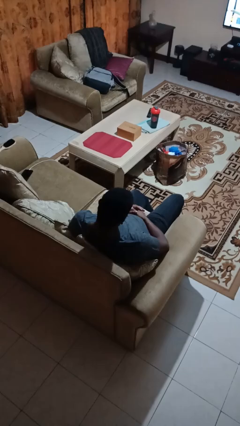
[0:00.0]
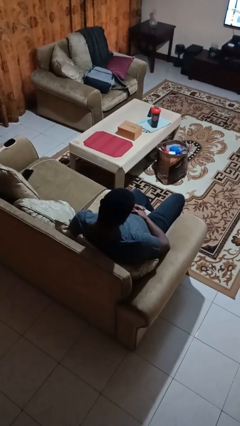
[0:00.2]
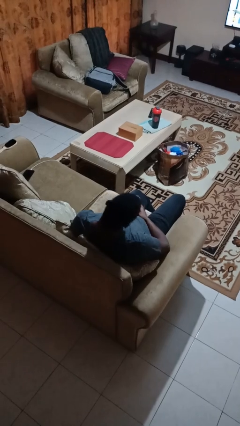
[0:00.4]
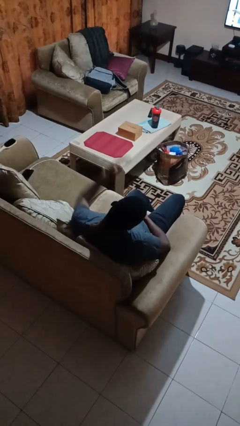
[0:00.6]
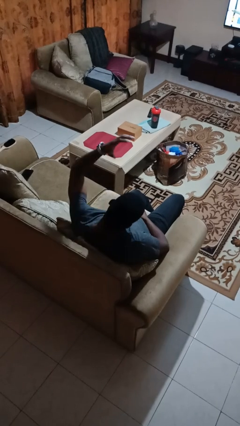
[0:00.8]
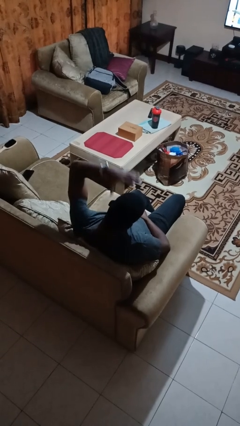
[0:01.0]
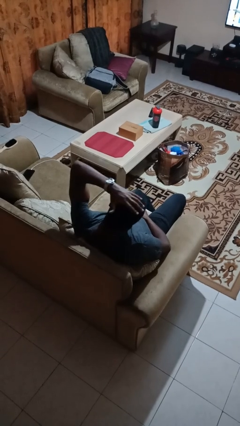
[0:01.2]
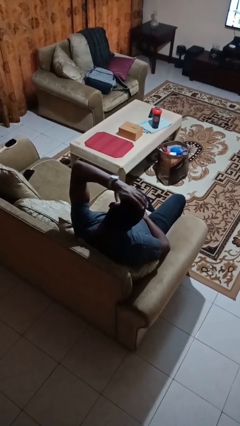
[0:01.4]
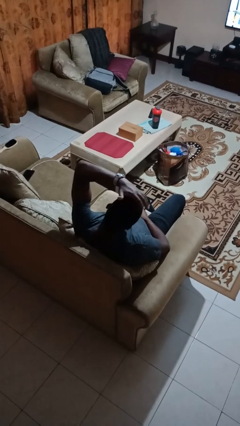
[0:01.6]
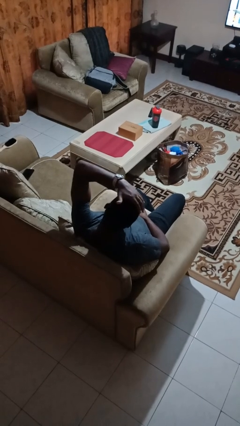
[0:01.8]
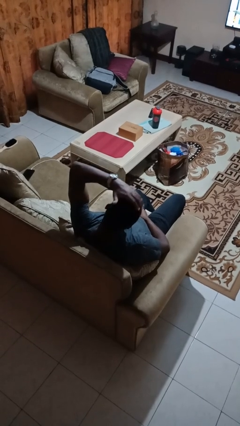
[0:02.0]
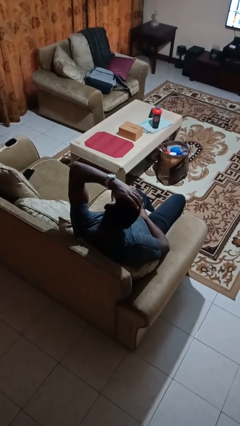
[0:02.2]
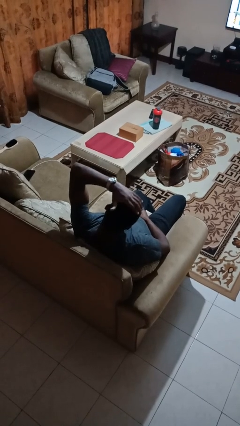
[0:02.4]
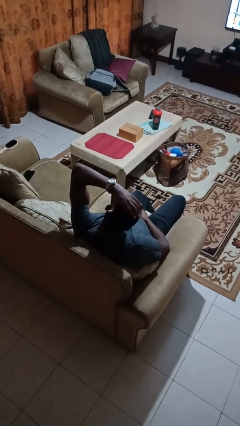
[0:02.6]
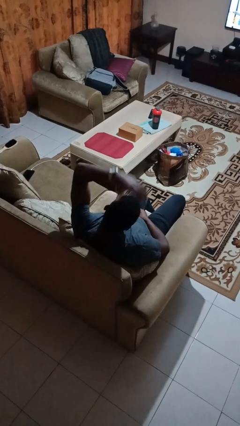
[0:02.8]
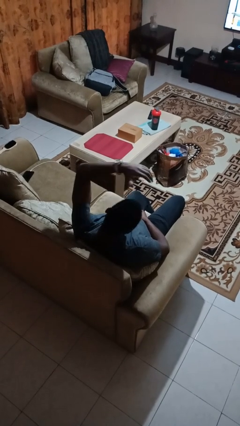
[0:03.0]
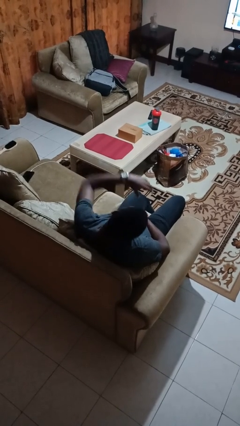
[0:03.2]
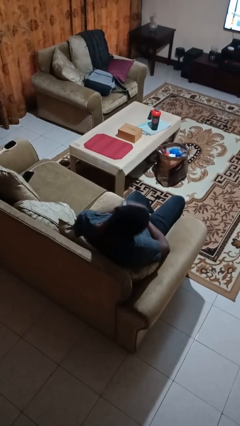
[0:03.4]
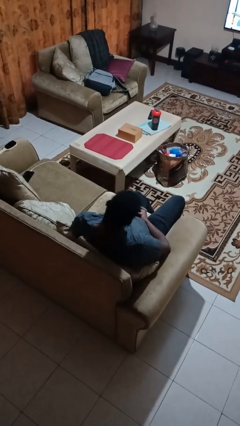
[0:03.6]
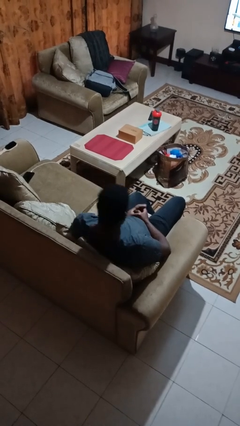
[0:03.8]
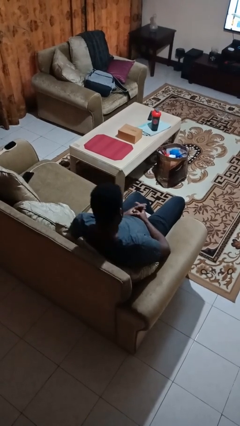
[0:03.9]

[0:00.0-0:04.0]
person pats head

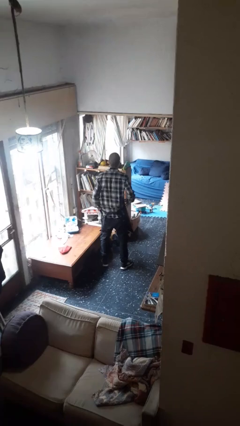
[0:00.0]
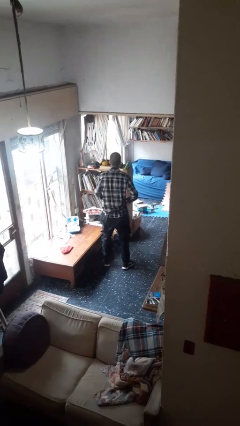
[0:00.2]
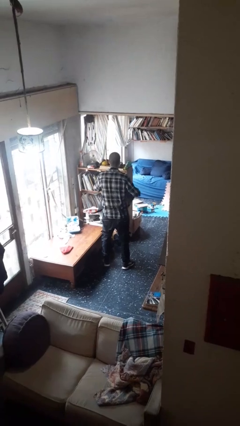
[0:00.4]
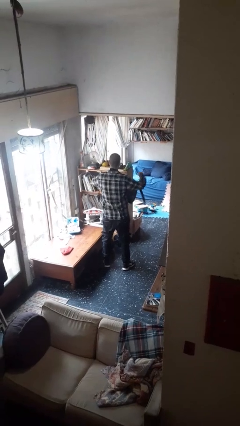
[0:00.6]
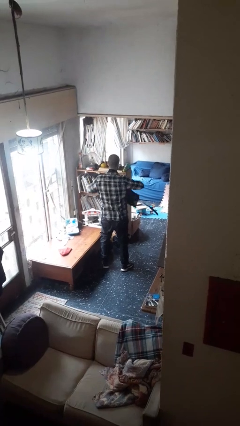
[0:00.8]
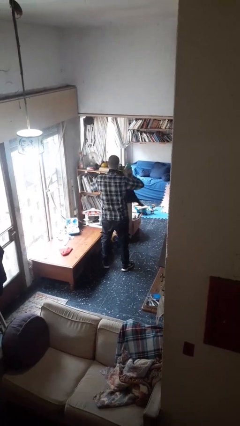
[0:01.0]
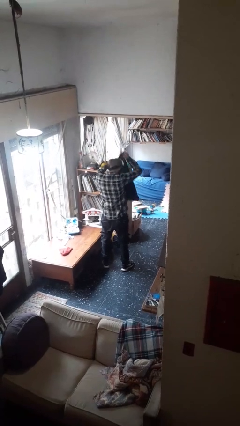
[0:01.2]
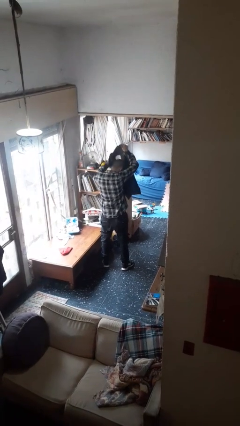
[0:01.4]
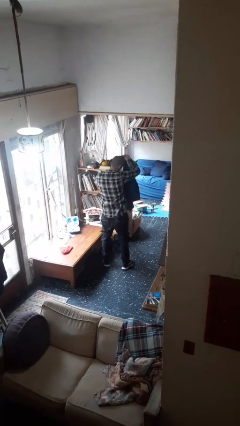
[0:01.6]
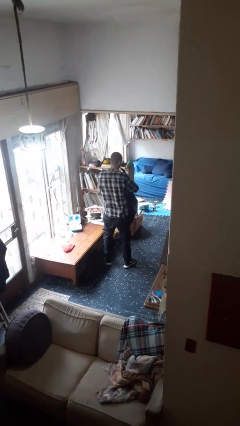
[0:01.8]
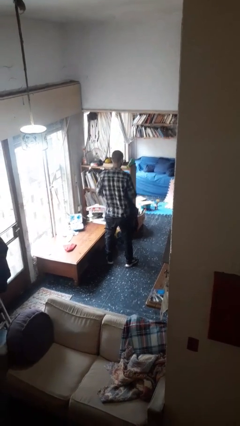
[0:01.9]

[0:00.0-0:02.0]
person takes off apron

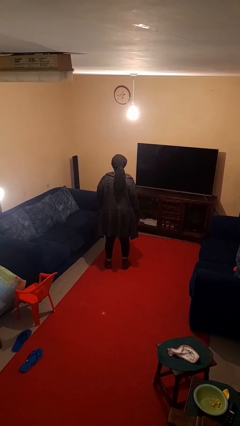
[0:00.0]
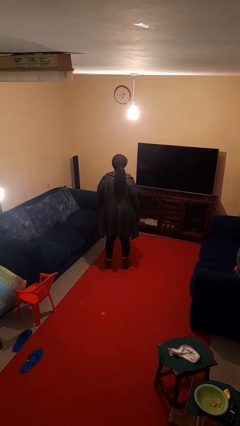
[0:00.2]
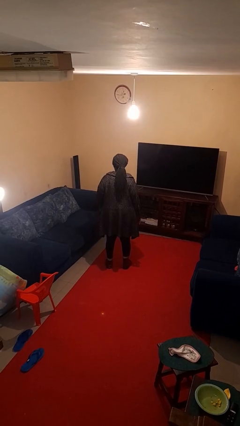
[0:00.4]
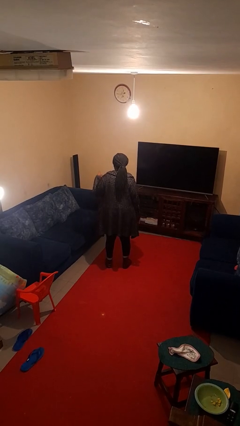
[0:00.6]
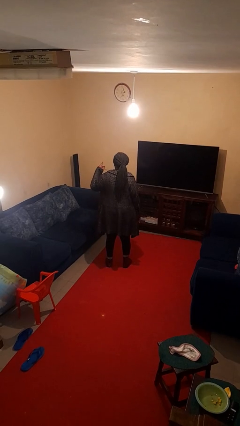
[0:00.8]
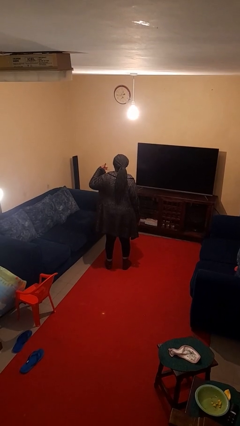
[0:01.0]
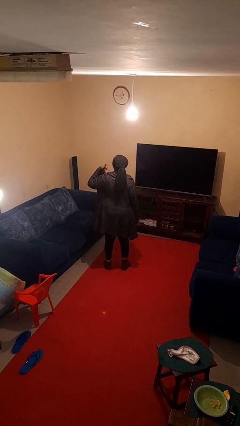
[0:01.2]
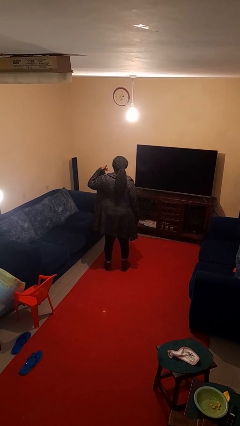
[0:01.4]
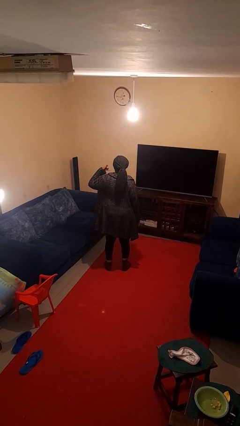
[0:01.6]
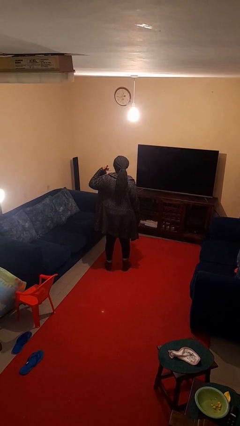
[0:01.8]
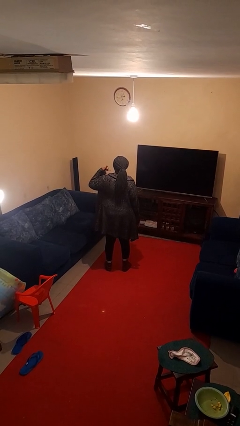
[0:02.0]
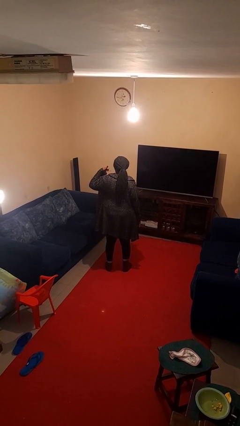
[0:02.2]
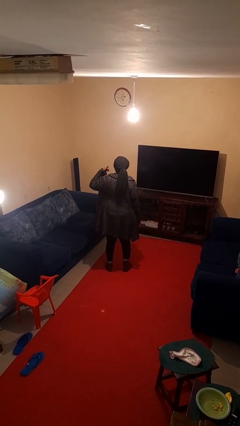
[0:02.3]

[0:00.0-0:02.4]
person gestures call me

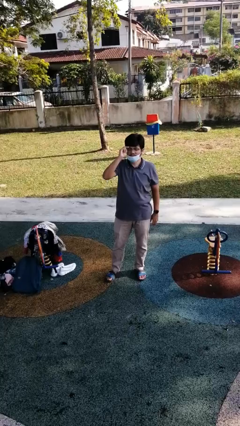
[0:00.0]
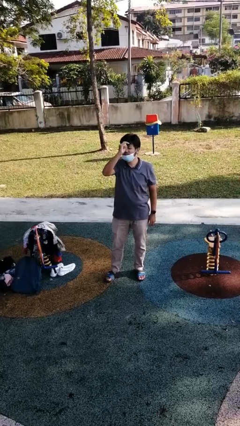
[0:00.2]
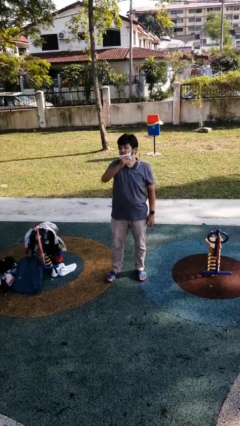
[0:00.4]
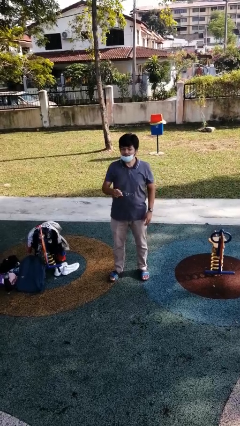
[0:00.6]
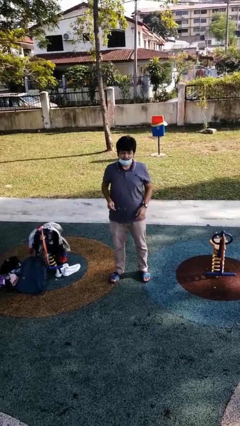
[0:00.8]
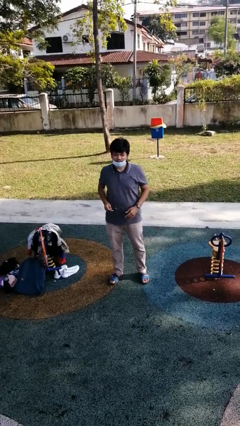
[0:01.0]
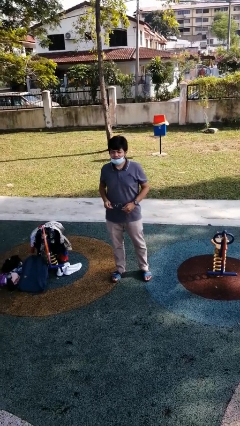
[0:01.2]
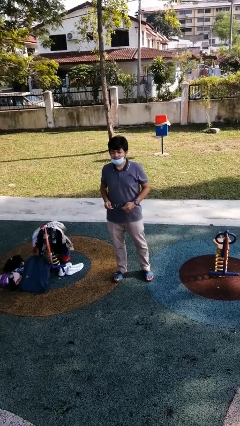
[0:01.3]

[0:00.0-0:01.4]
person takes off glasses

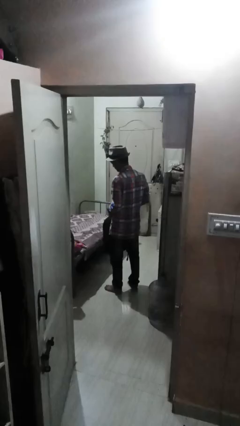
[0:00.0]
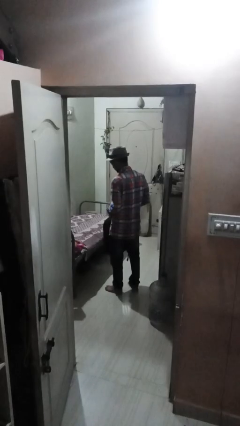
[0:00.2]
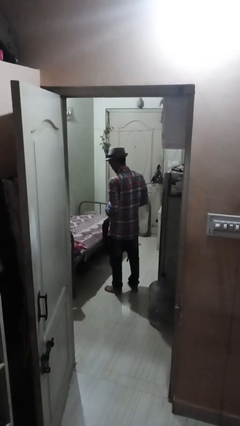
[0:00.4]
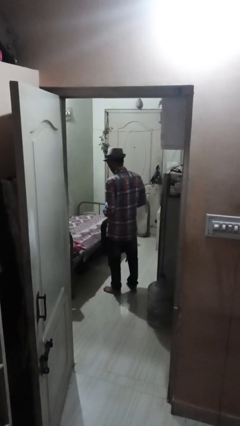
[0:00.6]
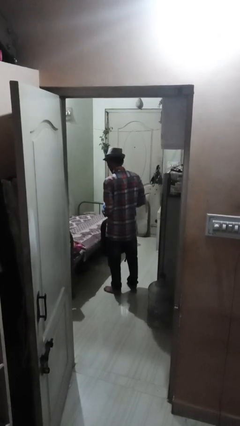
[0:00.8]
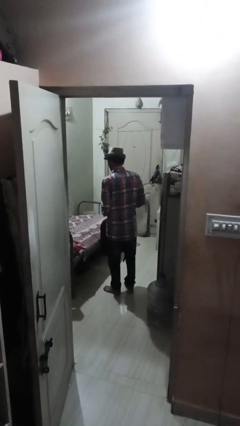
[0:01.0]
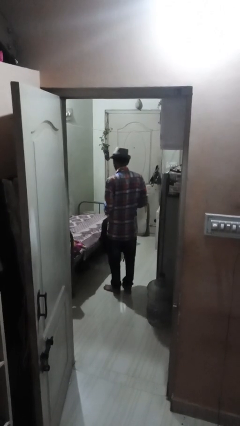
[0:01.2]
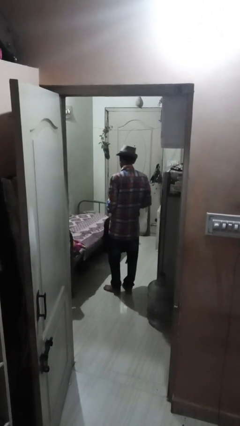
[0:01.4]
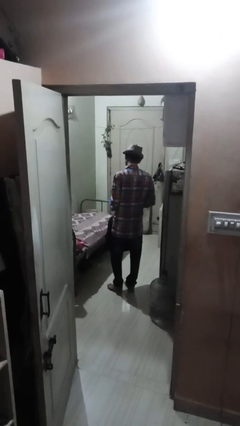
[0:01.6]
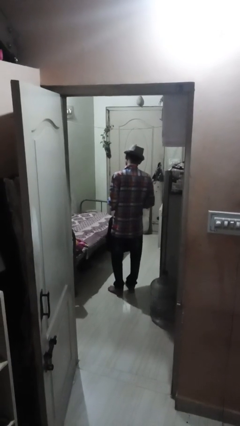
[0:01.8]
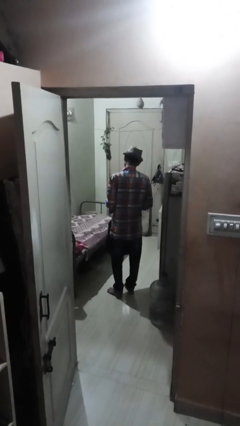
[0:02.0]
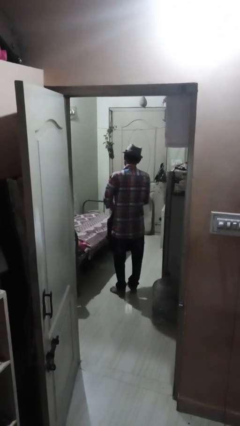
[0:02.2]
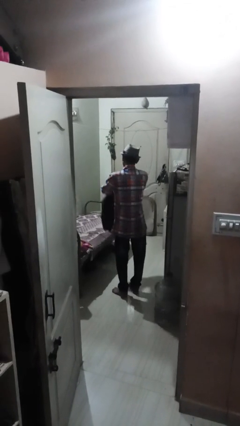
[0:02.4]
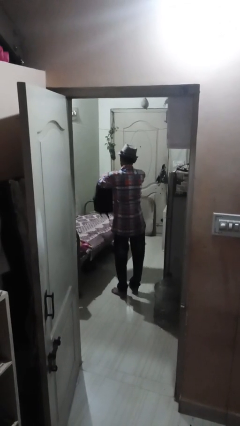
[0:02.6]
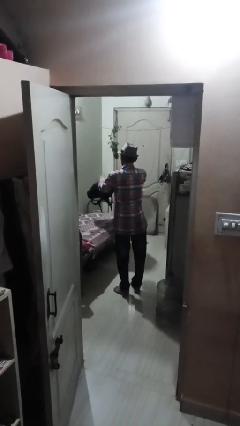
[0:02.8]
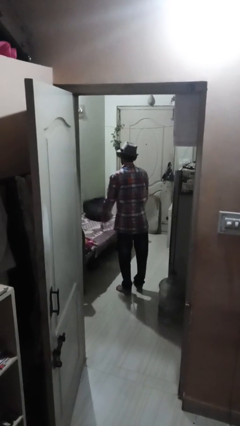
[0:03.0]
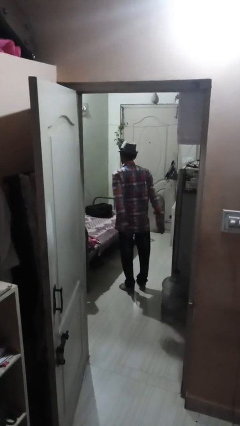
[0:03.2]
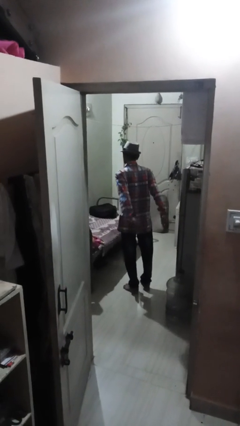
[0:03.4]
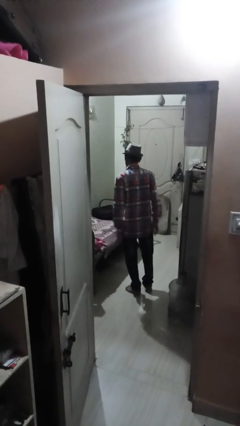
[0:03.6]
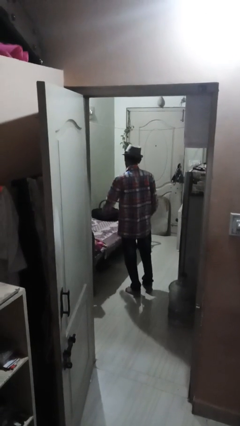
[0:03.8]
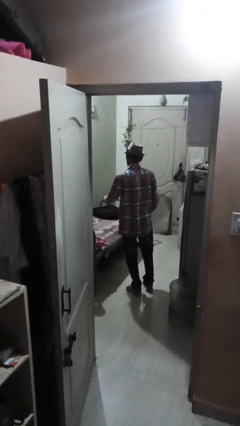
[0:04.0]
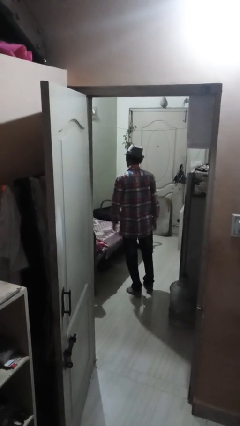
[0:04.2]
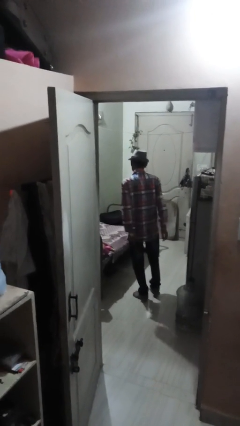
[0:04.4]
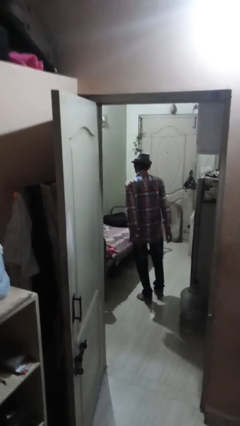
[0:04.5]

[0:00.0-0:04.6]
person throws object on bed

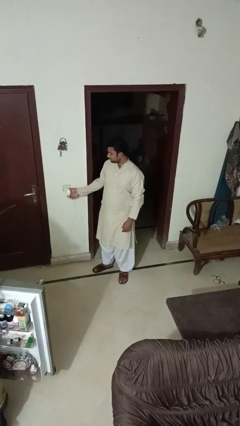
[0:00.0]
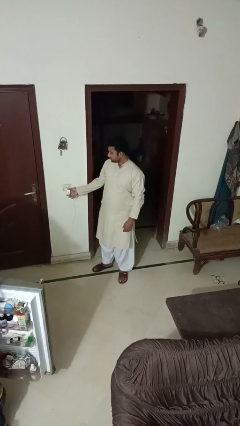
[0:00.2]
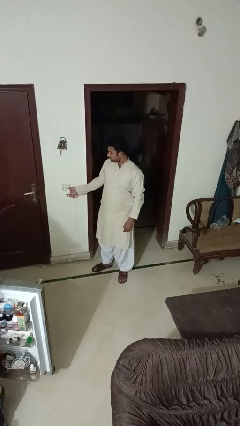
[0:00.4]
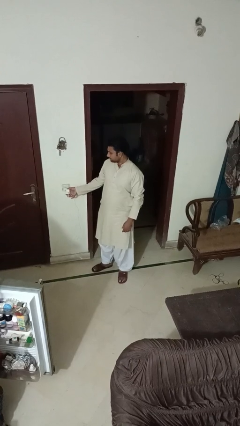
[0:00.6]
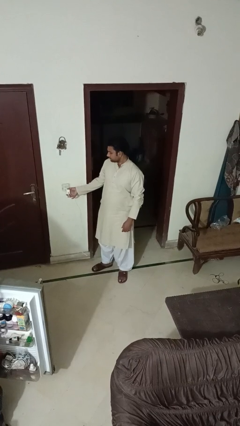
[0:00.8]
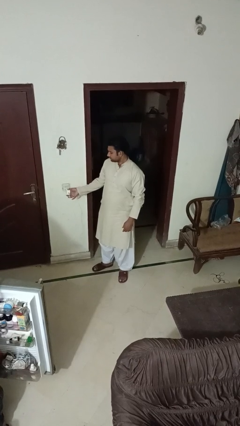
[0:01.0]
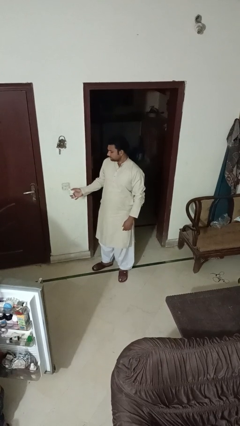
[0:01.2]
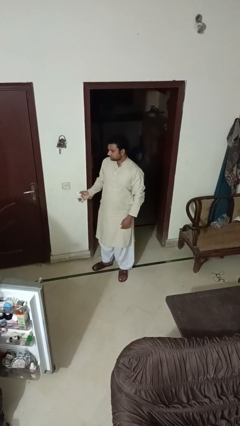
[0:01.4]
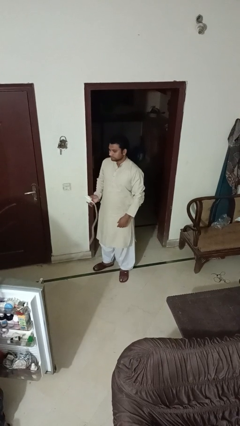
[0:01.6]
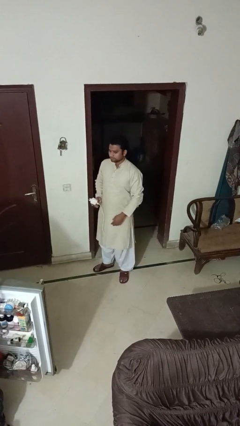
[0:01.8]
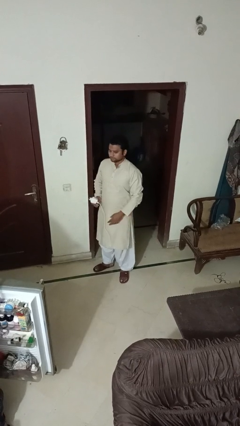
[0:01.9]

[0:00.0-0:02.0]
person unplugs from electrical socket

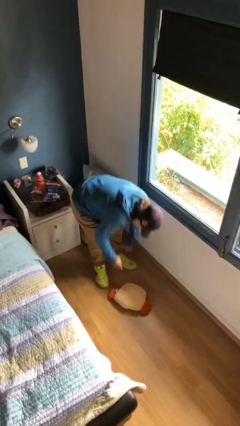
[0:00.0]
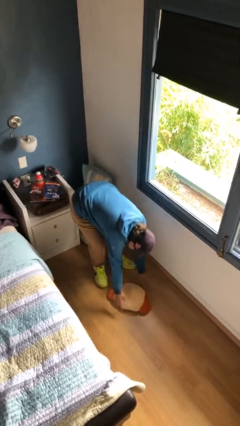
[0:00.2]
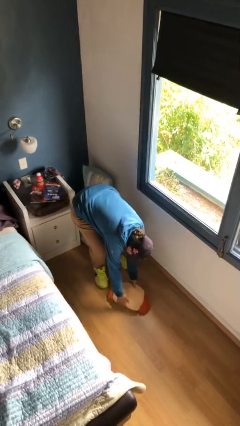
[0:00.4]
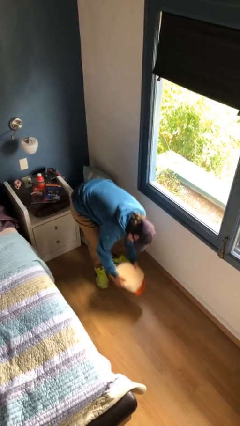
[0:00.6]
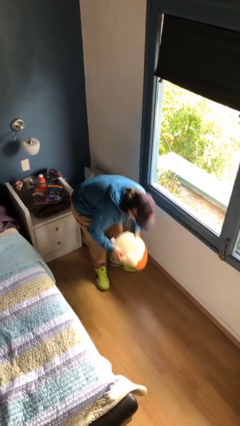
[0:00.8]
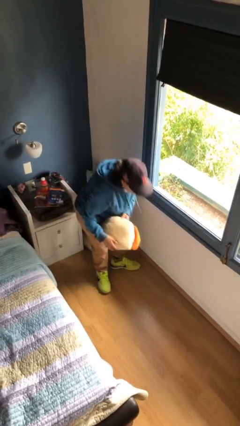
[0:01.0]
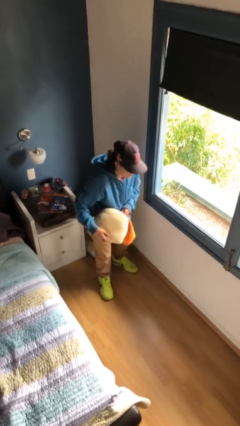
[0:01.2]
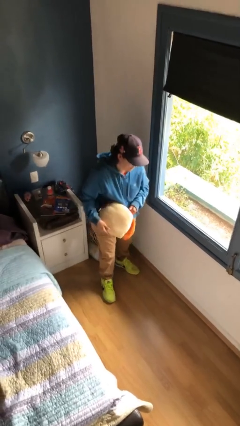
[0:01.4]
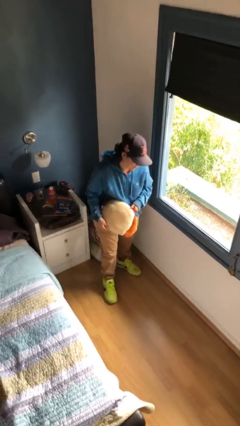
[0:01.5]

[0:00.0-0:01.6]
person picks up object from floor
